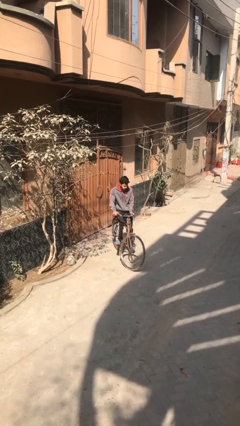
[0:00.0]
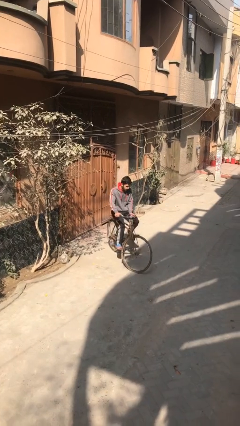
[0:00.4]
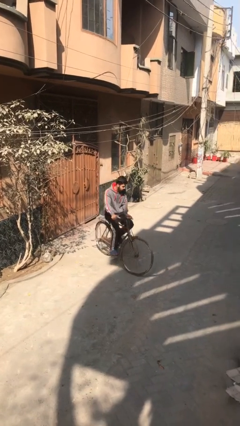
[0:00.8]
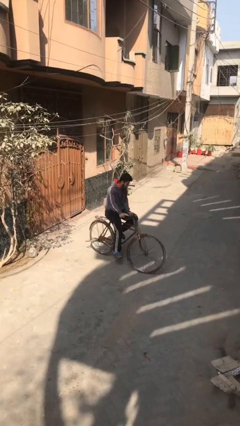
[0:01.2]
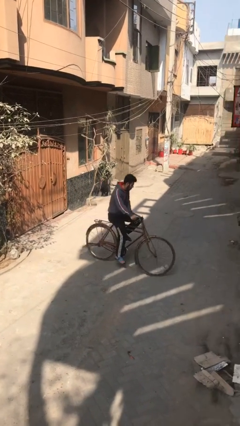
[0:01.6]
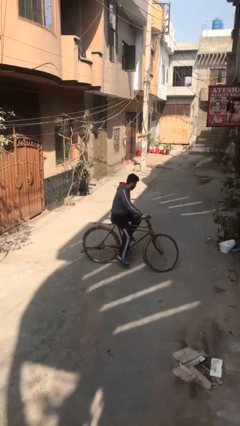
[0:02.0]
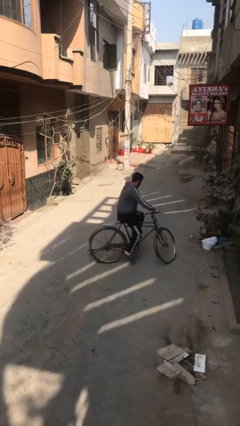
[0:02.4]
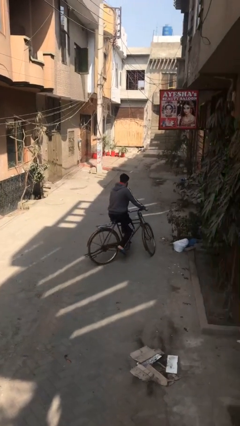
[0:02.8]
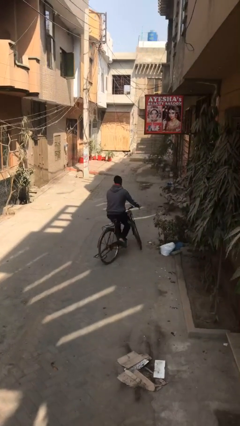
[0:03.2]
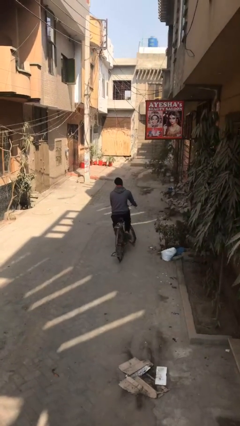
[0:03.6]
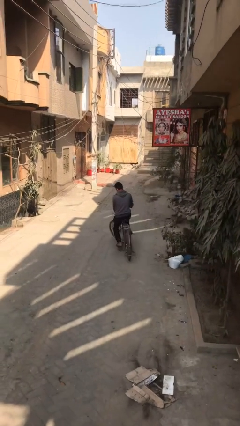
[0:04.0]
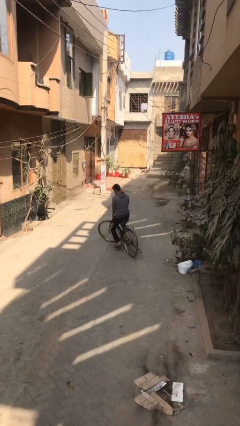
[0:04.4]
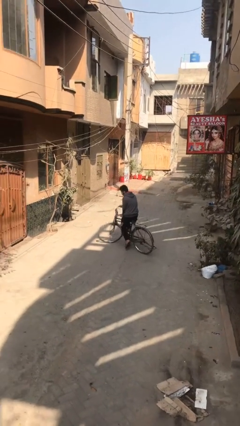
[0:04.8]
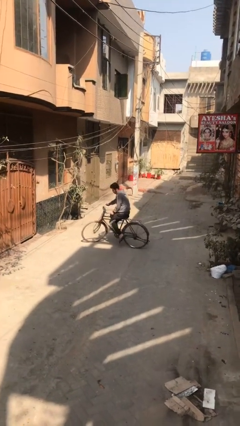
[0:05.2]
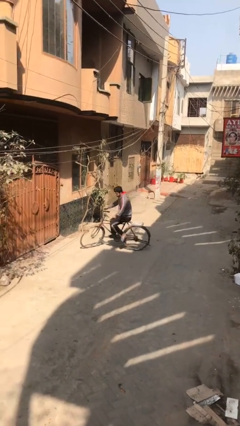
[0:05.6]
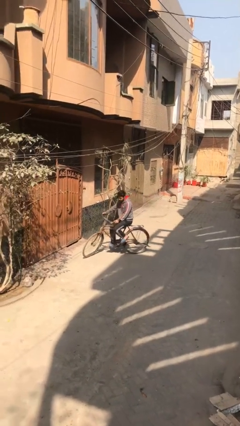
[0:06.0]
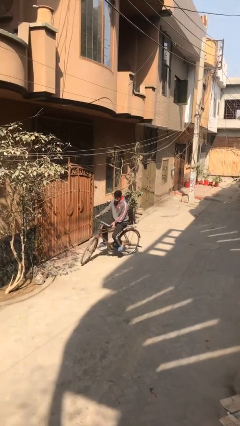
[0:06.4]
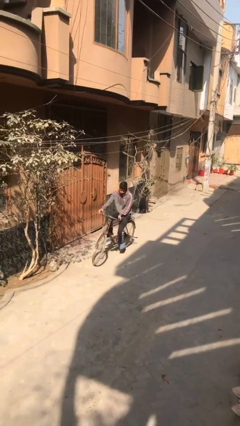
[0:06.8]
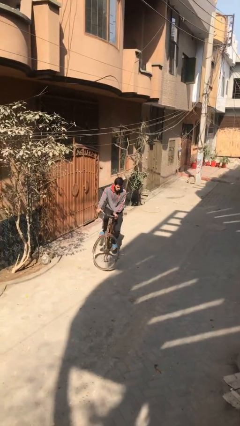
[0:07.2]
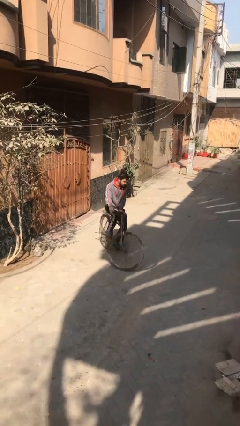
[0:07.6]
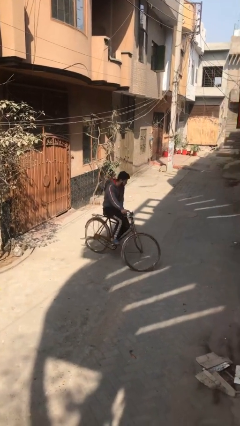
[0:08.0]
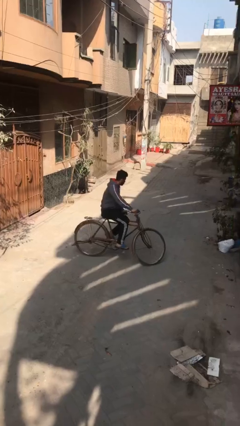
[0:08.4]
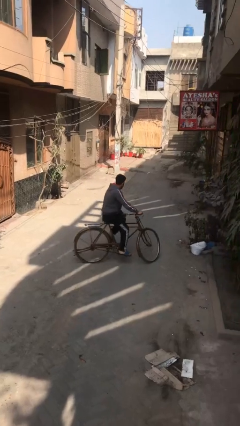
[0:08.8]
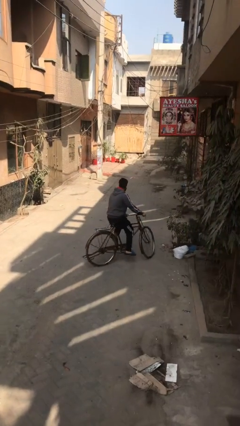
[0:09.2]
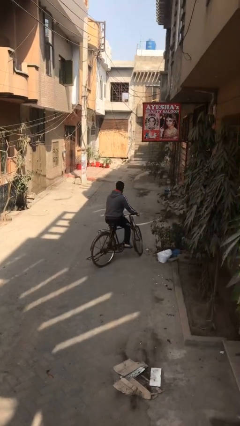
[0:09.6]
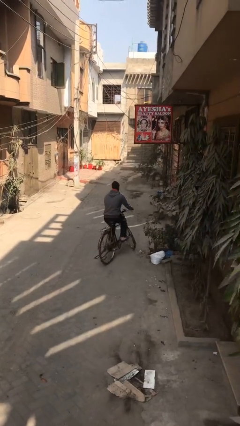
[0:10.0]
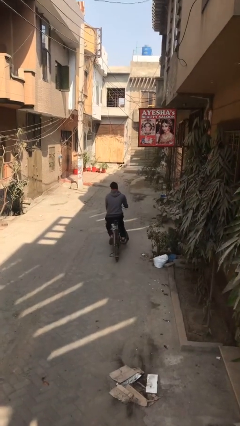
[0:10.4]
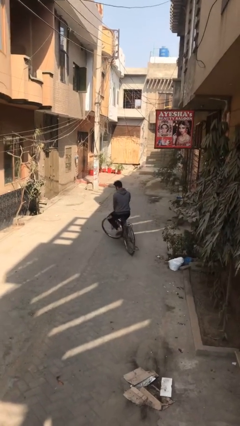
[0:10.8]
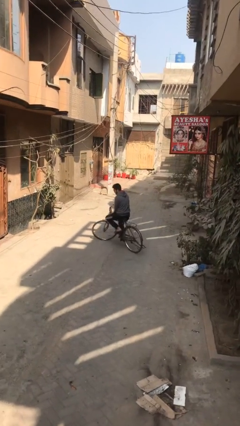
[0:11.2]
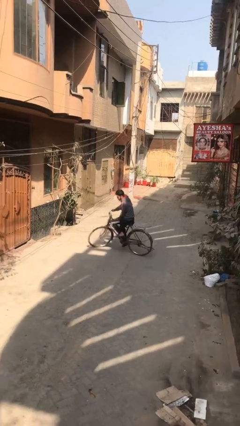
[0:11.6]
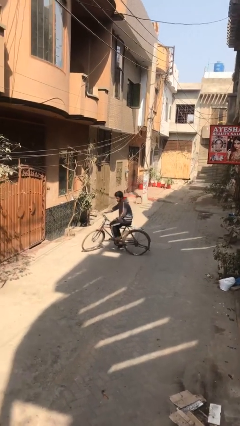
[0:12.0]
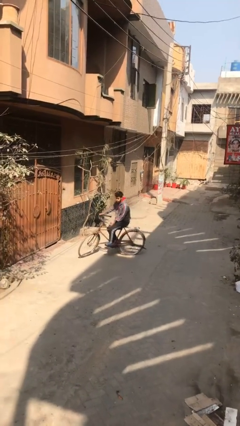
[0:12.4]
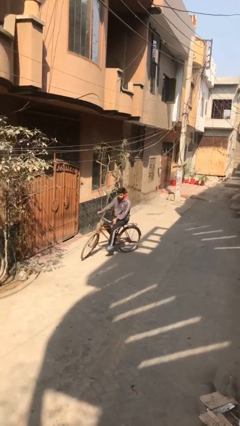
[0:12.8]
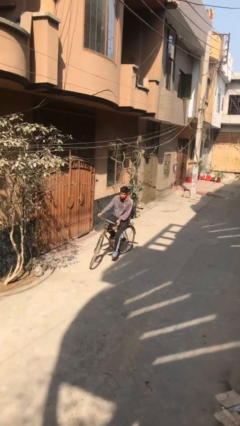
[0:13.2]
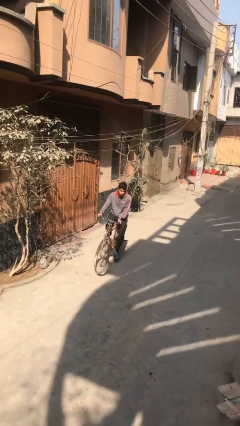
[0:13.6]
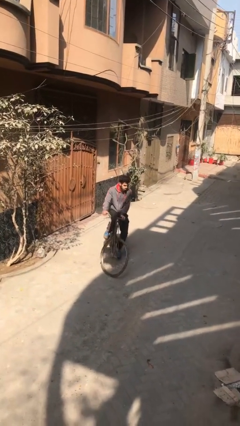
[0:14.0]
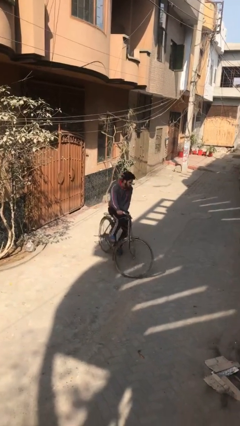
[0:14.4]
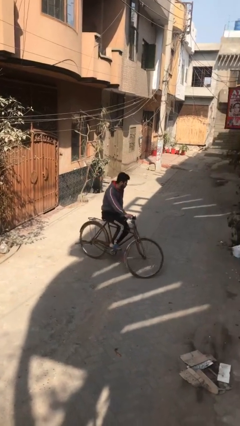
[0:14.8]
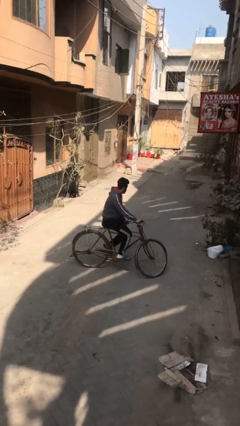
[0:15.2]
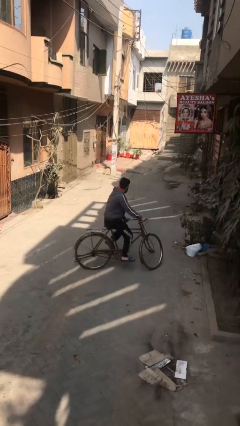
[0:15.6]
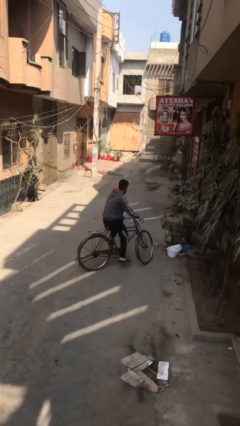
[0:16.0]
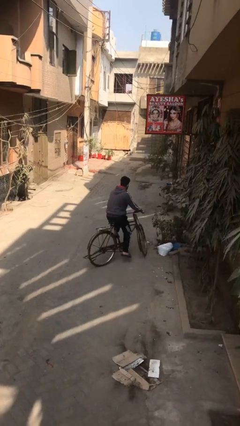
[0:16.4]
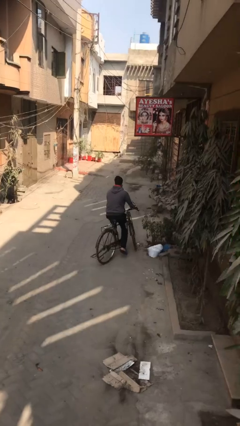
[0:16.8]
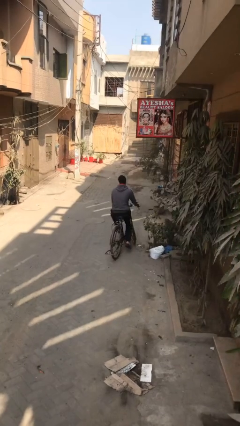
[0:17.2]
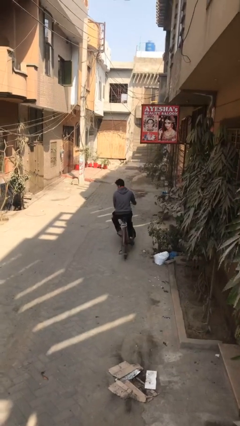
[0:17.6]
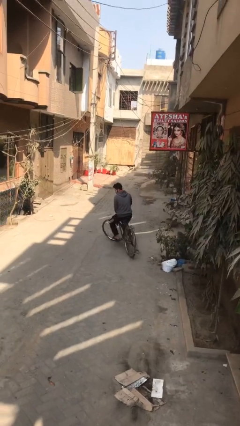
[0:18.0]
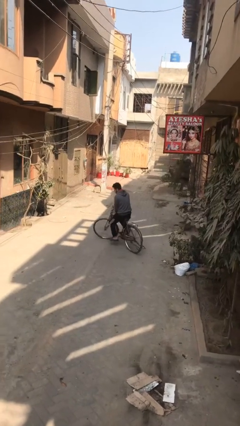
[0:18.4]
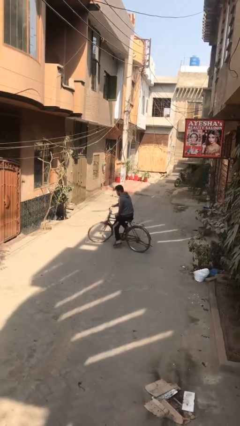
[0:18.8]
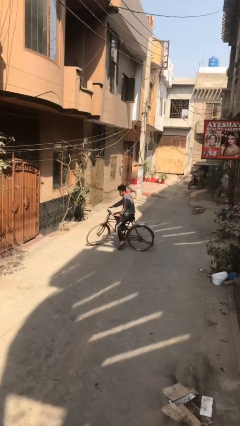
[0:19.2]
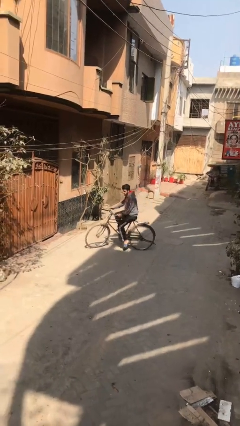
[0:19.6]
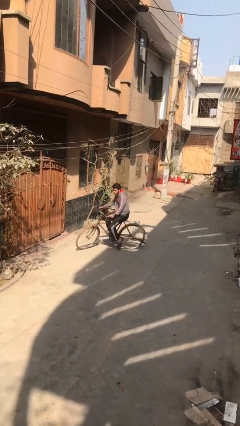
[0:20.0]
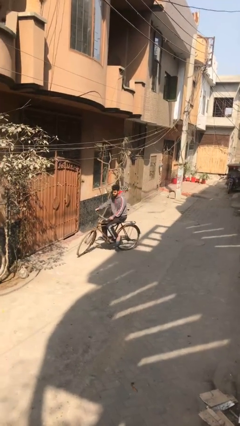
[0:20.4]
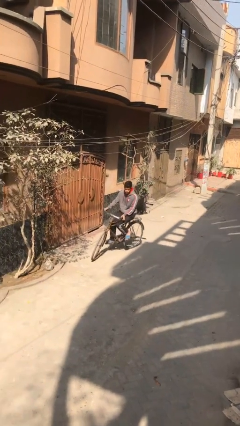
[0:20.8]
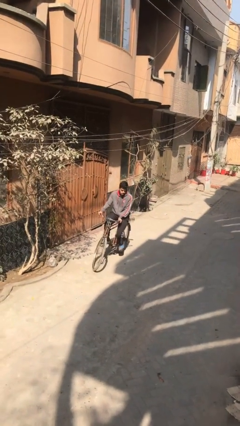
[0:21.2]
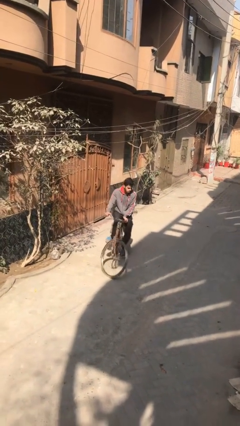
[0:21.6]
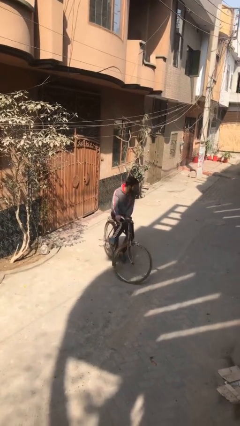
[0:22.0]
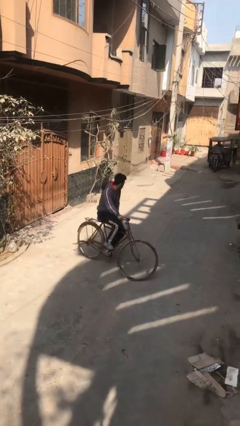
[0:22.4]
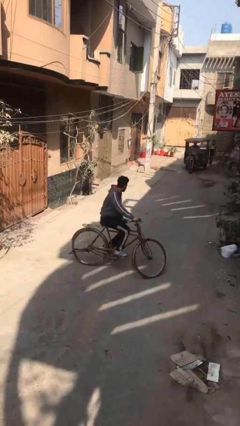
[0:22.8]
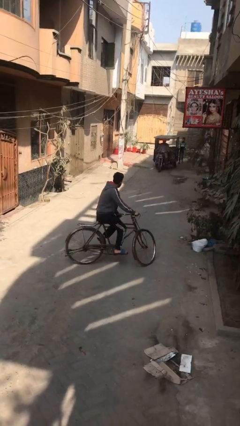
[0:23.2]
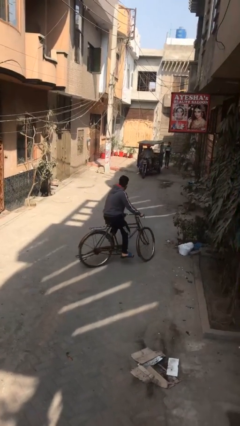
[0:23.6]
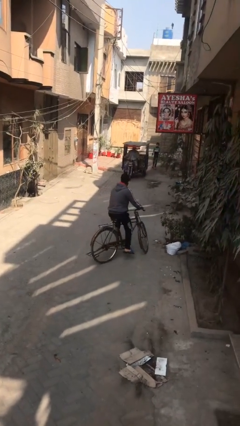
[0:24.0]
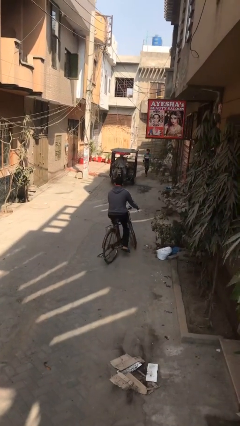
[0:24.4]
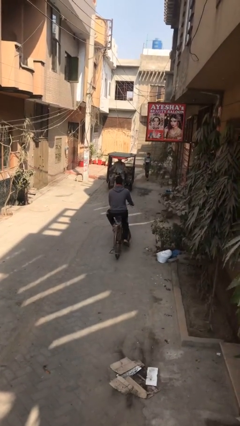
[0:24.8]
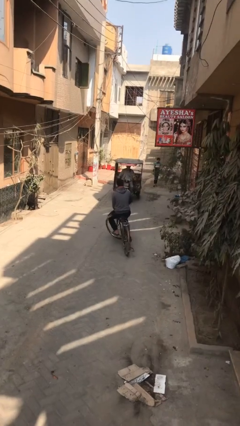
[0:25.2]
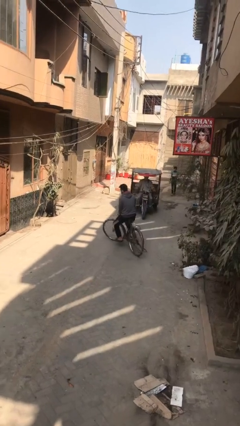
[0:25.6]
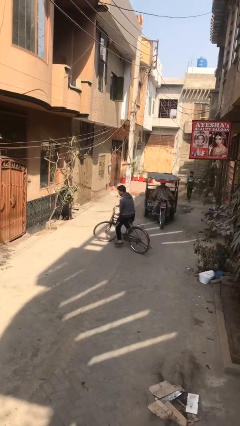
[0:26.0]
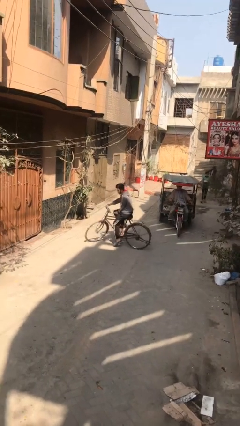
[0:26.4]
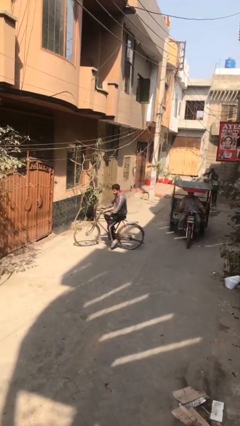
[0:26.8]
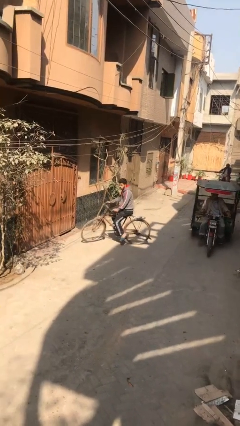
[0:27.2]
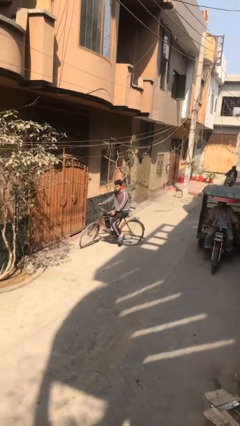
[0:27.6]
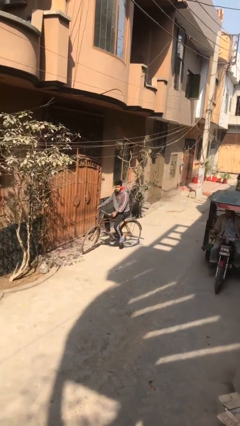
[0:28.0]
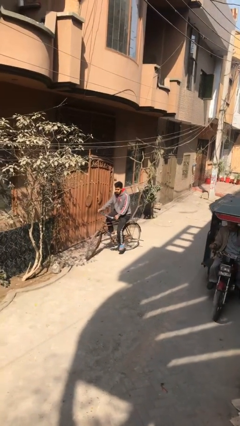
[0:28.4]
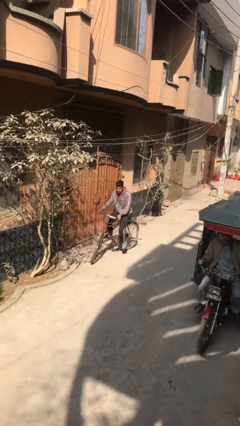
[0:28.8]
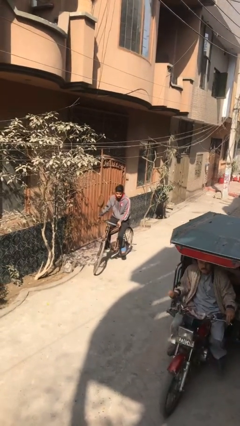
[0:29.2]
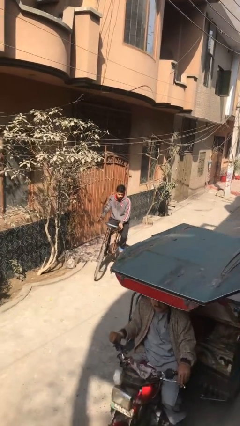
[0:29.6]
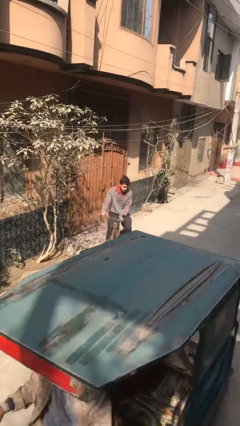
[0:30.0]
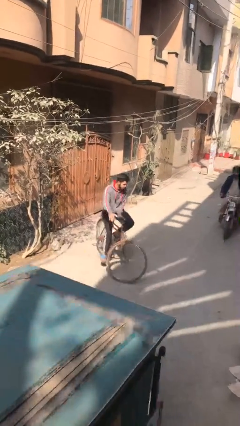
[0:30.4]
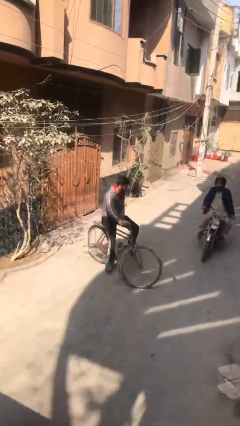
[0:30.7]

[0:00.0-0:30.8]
person rides bicycle

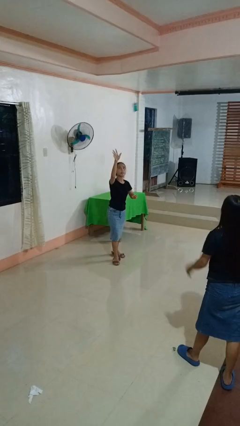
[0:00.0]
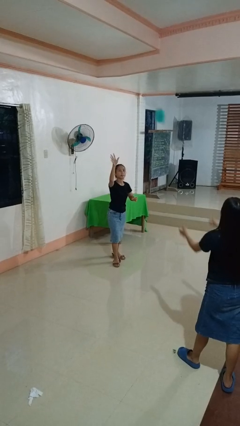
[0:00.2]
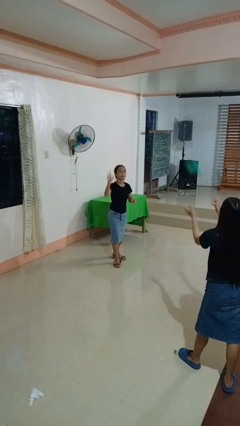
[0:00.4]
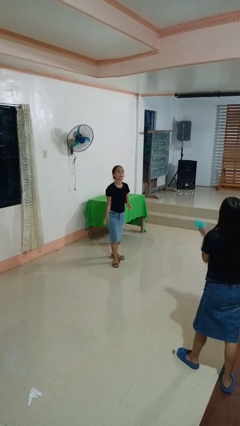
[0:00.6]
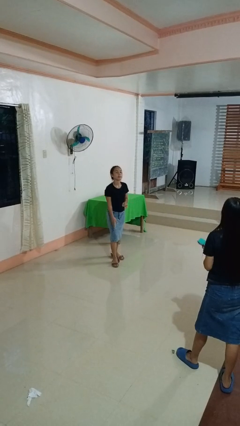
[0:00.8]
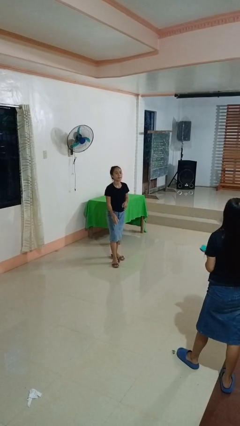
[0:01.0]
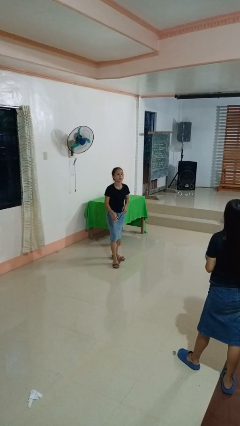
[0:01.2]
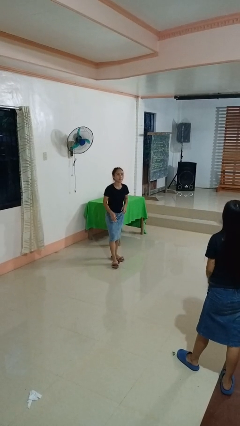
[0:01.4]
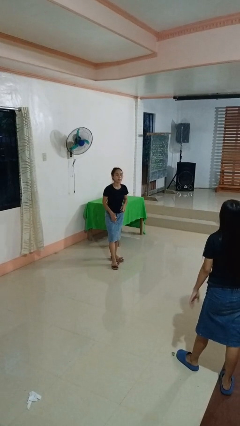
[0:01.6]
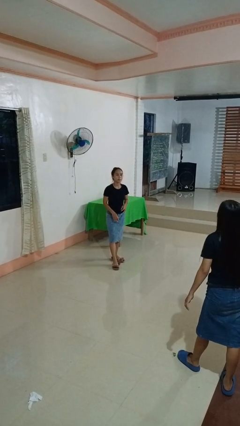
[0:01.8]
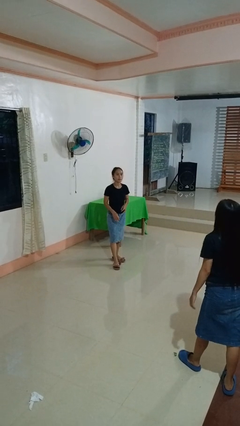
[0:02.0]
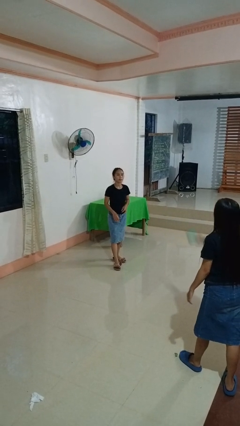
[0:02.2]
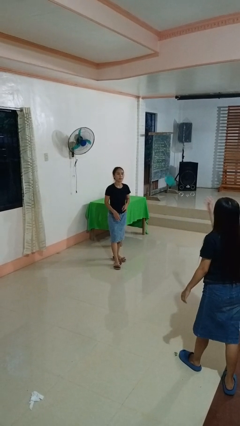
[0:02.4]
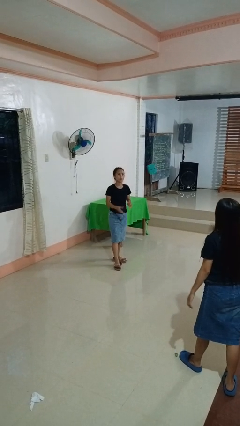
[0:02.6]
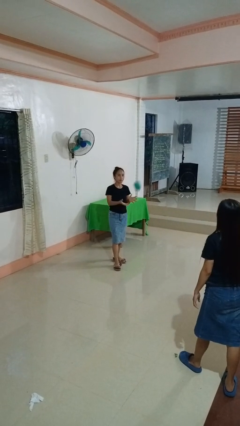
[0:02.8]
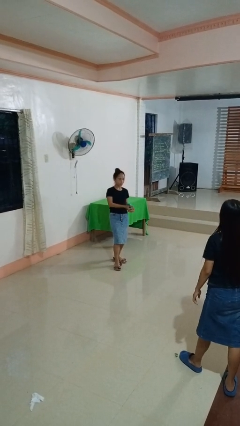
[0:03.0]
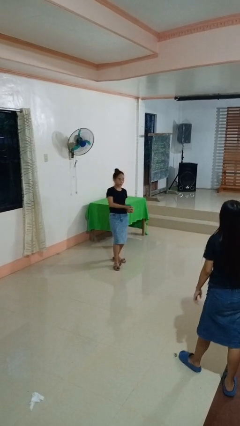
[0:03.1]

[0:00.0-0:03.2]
person throws object to person
